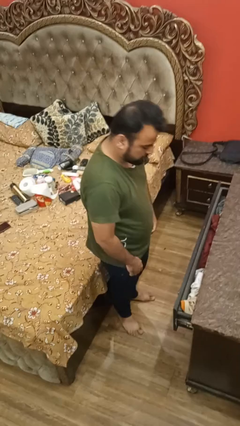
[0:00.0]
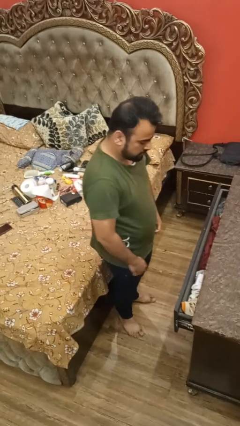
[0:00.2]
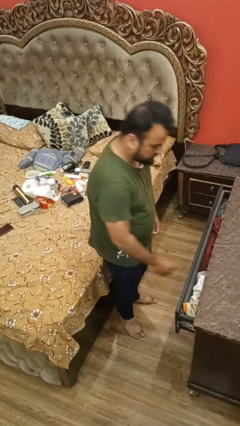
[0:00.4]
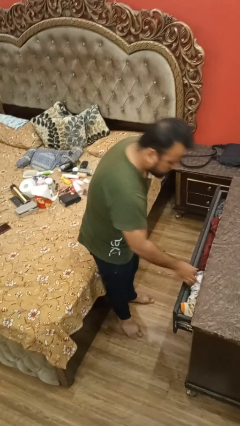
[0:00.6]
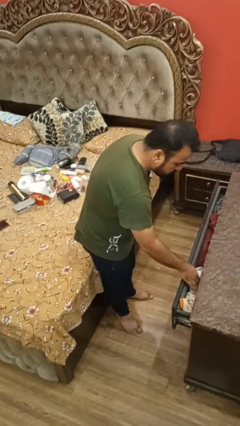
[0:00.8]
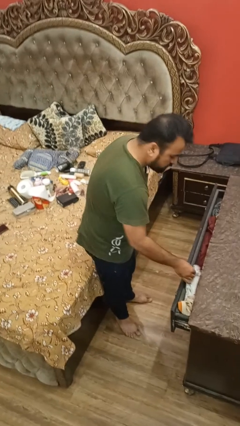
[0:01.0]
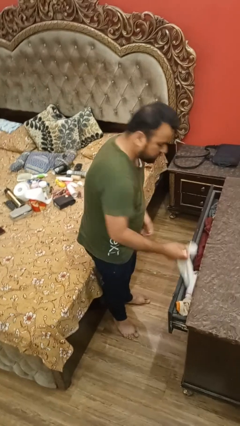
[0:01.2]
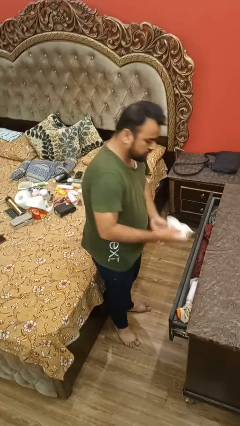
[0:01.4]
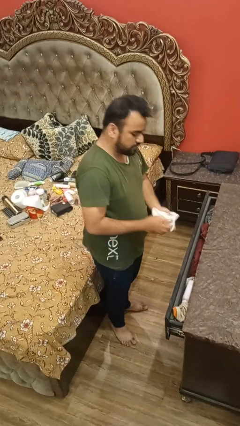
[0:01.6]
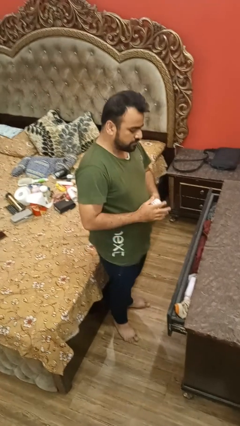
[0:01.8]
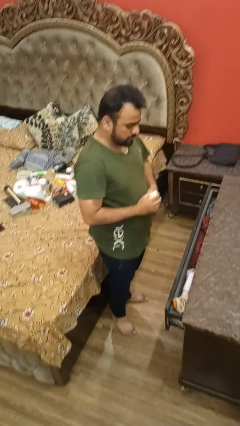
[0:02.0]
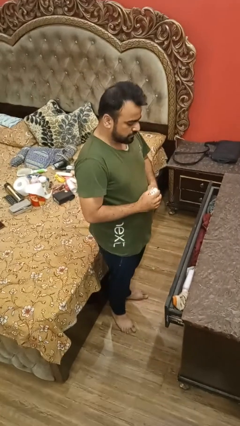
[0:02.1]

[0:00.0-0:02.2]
person takes clothes from dresser

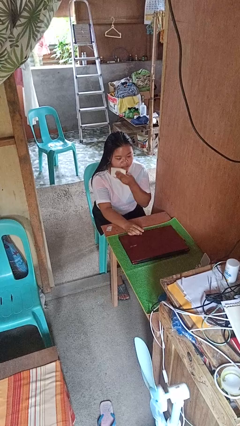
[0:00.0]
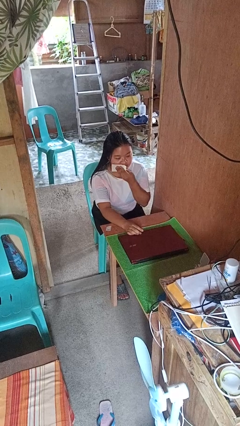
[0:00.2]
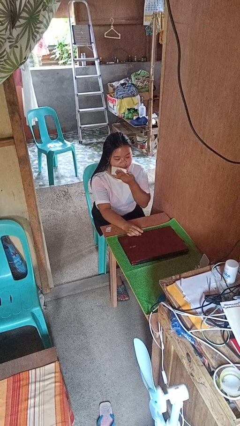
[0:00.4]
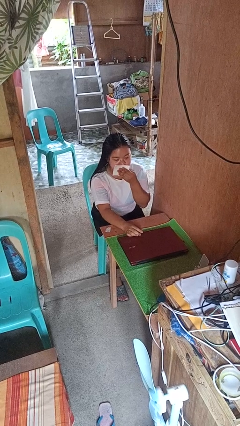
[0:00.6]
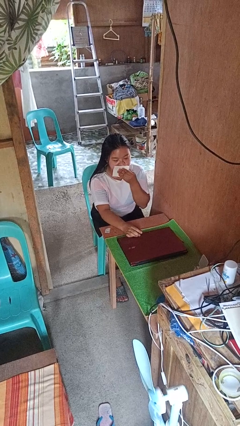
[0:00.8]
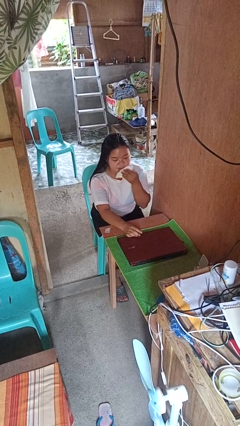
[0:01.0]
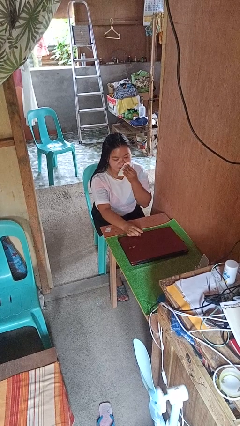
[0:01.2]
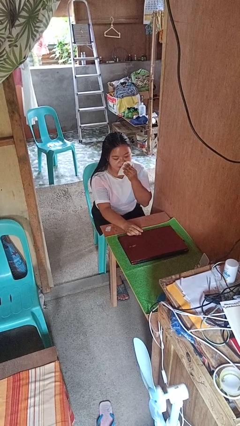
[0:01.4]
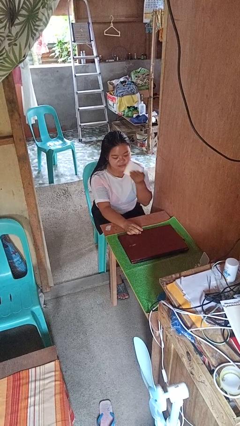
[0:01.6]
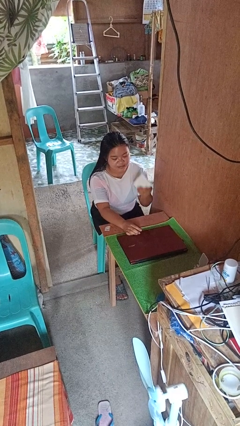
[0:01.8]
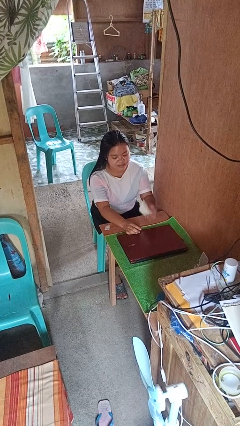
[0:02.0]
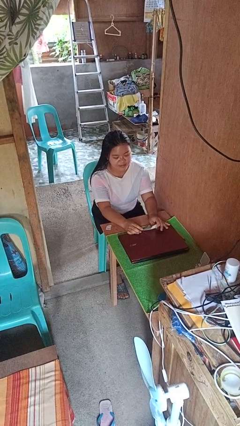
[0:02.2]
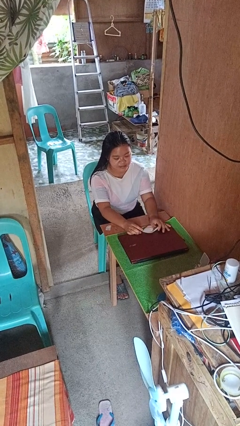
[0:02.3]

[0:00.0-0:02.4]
person wipes mouth with napkin

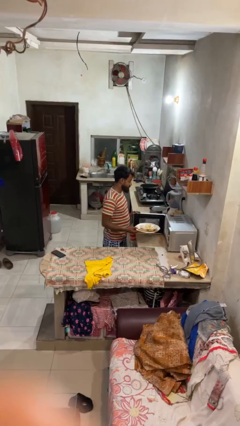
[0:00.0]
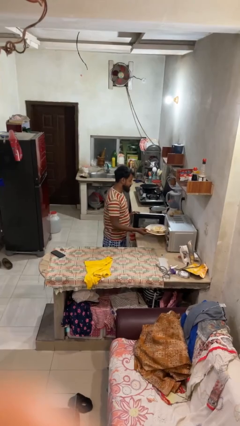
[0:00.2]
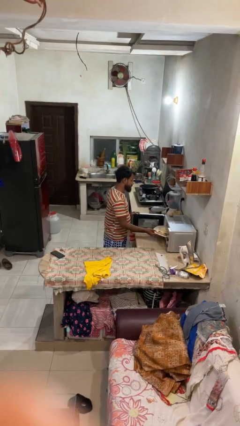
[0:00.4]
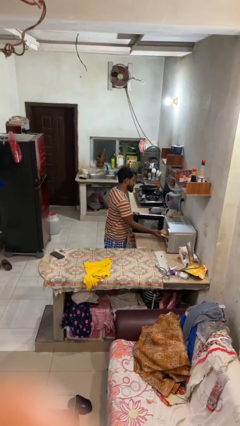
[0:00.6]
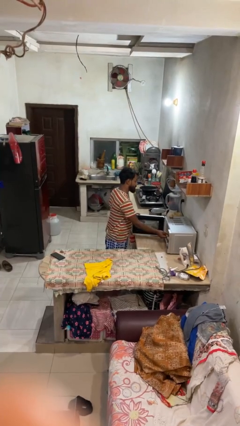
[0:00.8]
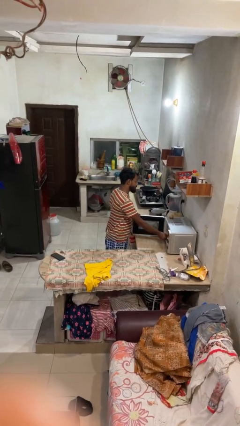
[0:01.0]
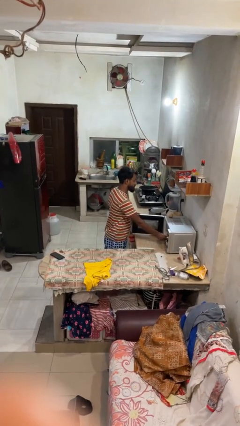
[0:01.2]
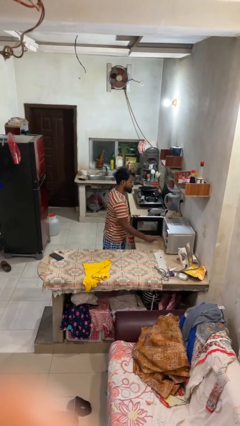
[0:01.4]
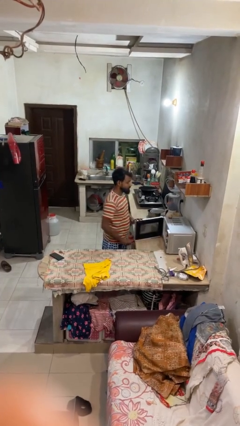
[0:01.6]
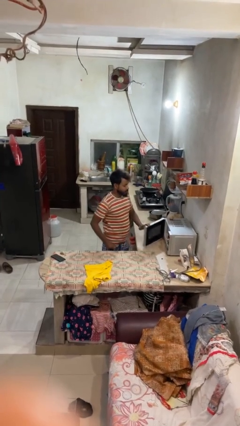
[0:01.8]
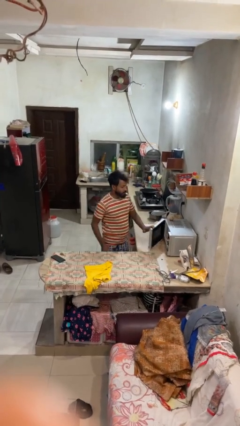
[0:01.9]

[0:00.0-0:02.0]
person puts object into microwave

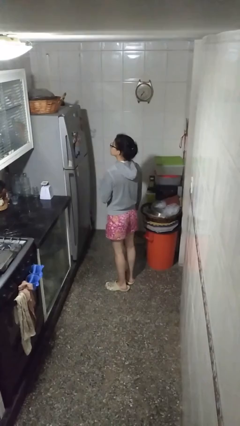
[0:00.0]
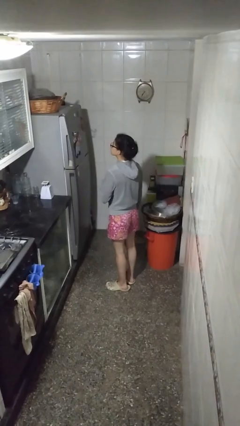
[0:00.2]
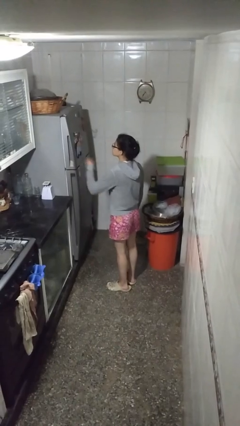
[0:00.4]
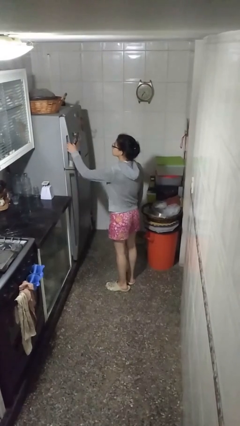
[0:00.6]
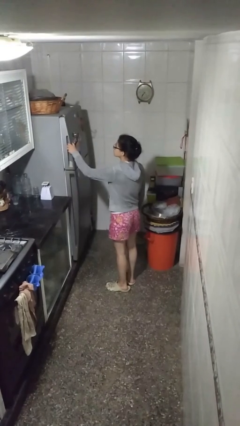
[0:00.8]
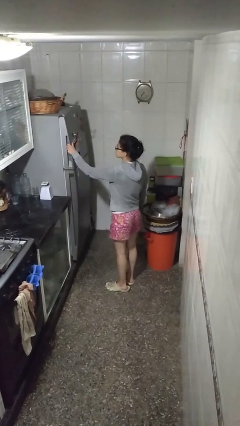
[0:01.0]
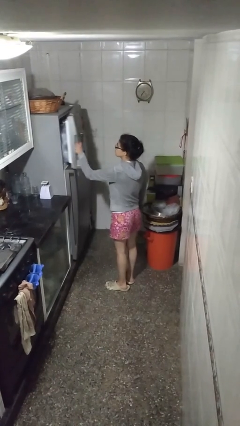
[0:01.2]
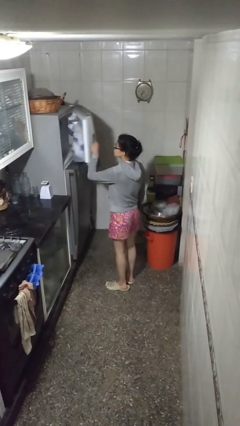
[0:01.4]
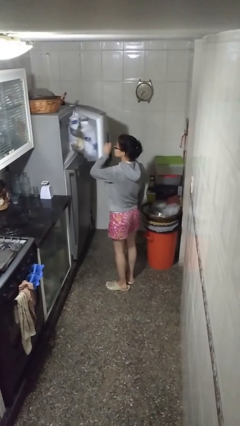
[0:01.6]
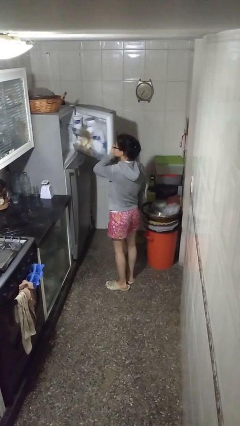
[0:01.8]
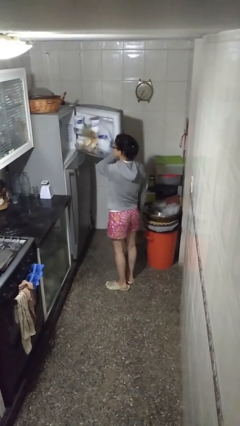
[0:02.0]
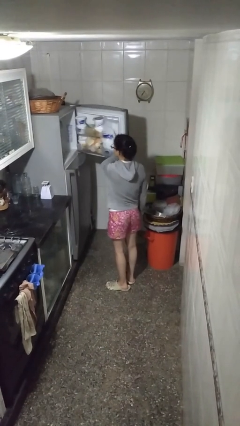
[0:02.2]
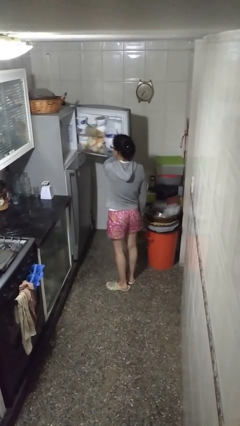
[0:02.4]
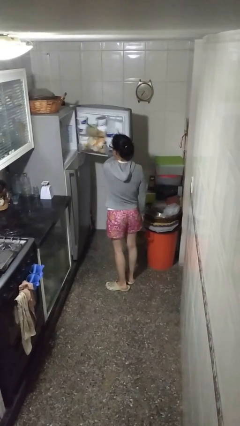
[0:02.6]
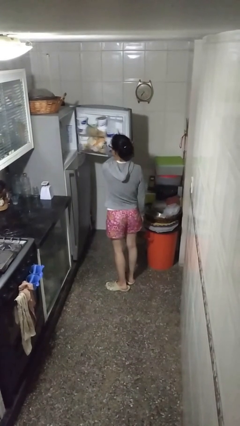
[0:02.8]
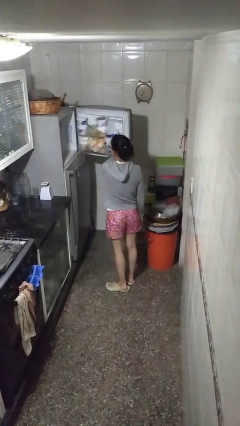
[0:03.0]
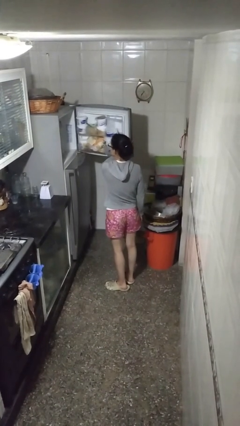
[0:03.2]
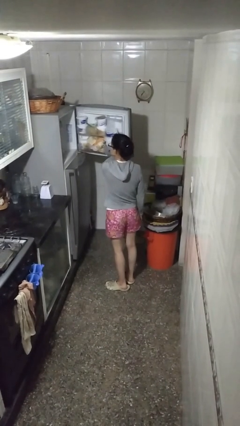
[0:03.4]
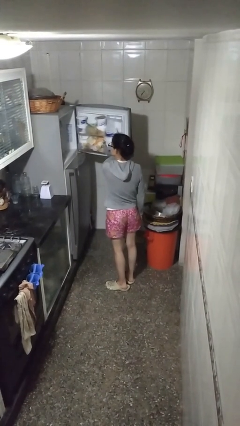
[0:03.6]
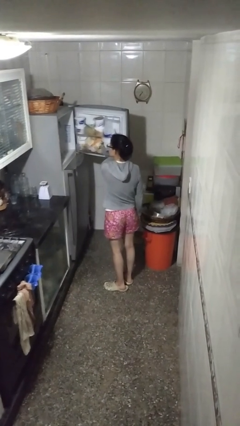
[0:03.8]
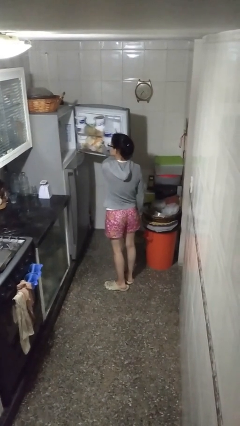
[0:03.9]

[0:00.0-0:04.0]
person opens refrigerator

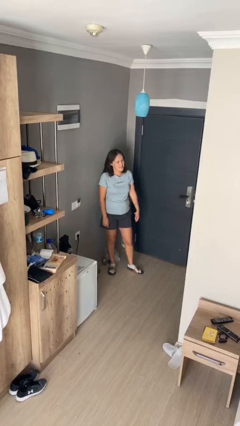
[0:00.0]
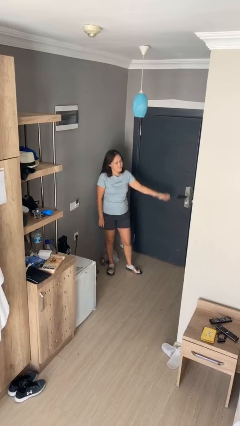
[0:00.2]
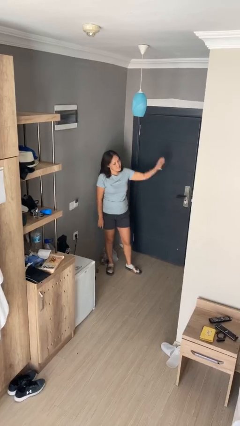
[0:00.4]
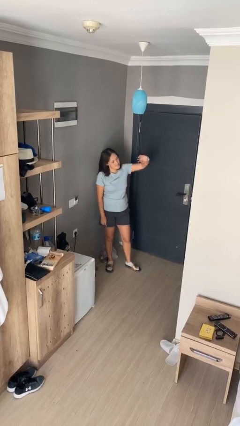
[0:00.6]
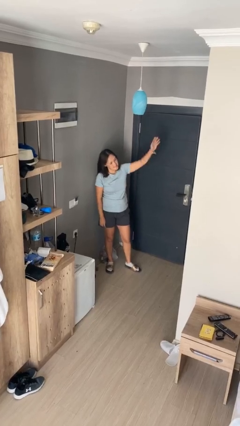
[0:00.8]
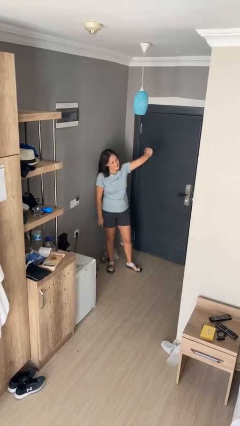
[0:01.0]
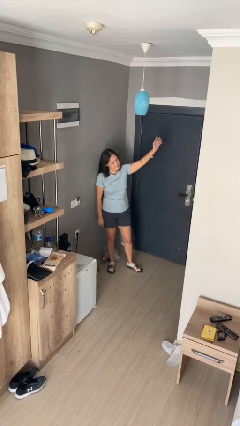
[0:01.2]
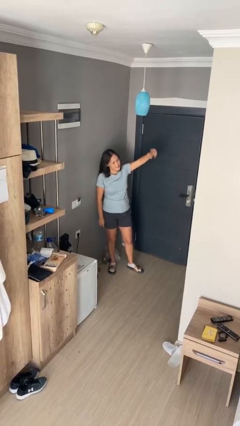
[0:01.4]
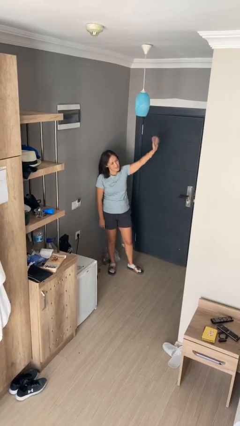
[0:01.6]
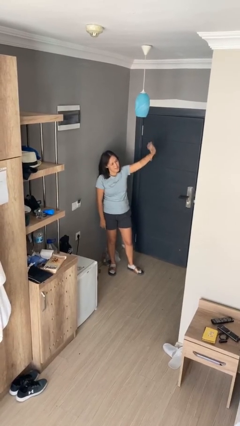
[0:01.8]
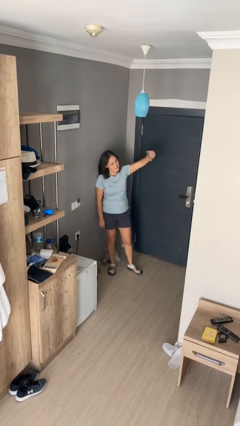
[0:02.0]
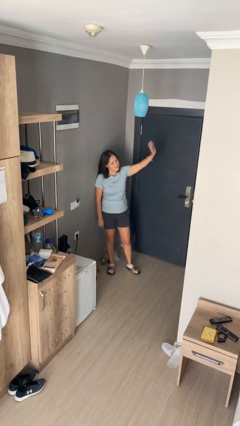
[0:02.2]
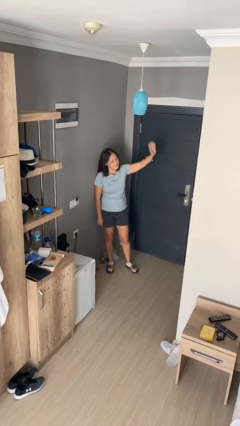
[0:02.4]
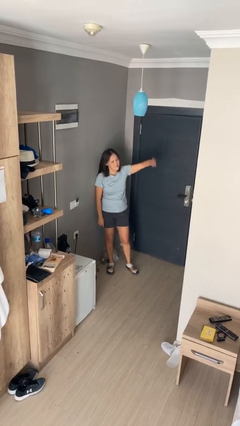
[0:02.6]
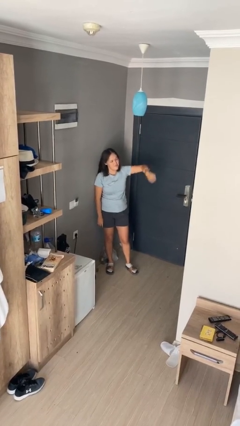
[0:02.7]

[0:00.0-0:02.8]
person waves at person

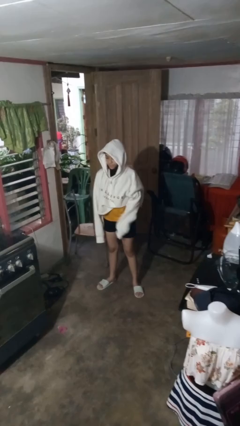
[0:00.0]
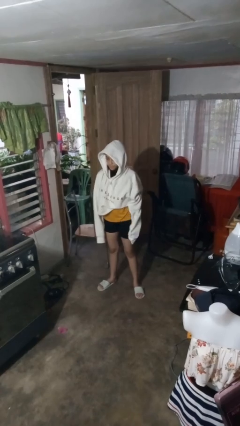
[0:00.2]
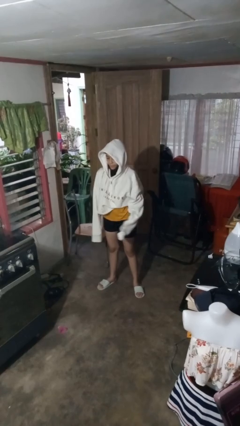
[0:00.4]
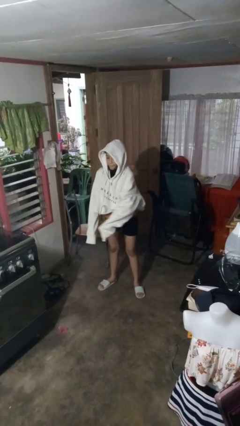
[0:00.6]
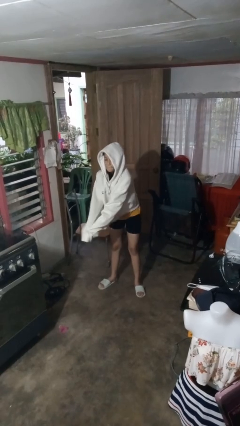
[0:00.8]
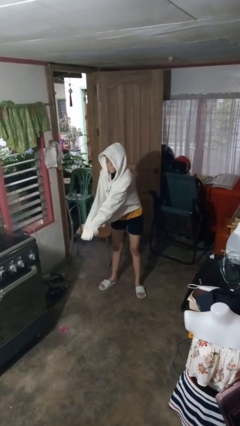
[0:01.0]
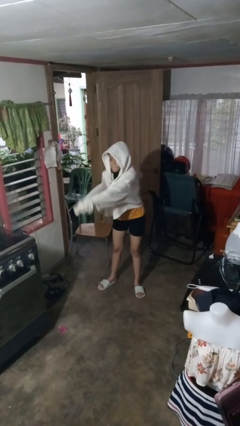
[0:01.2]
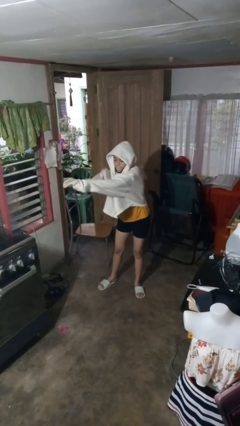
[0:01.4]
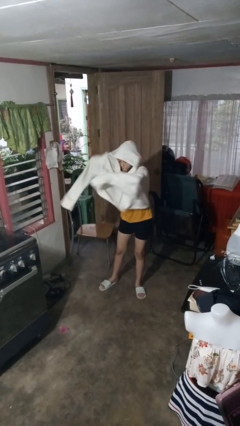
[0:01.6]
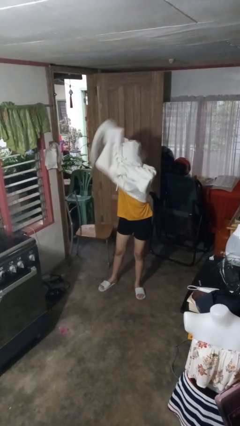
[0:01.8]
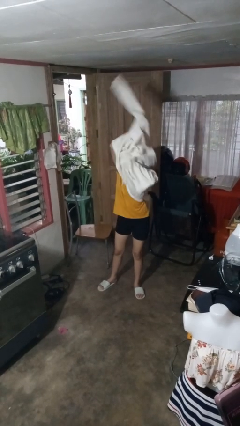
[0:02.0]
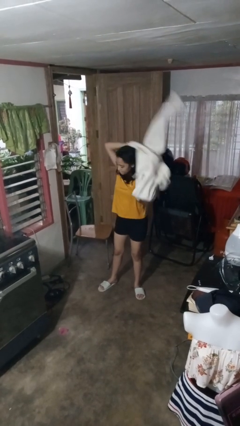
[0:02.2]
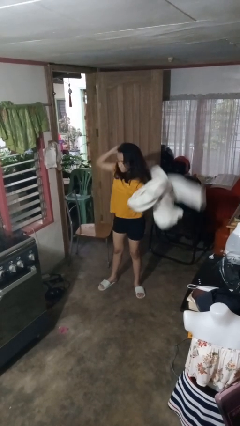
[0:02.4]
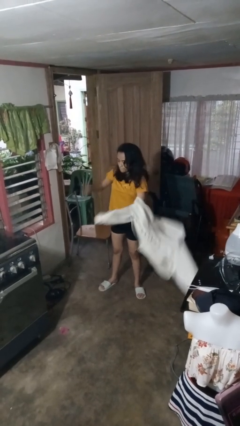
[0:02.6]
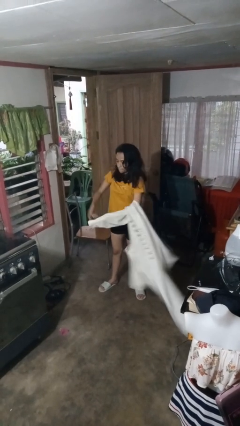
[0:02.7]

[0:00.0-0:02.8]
person takes off hoodie

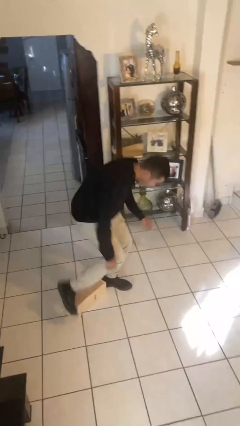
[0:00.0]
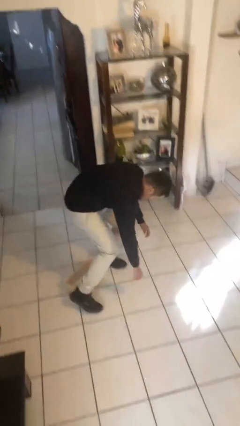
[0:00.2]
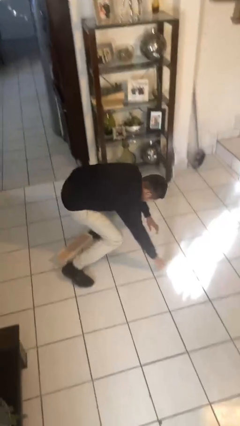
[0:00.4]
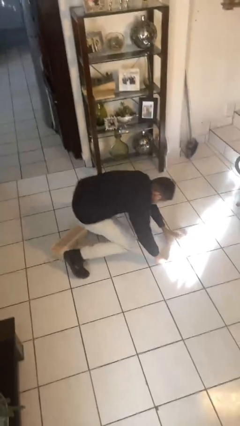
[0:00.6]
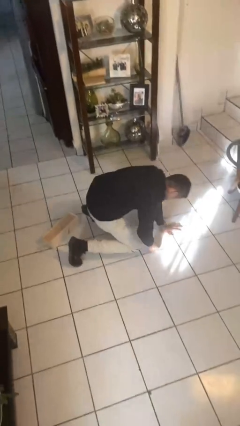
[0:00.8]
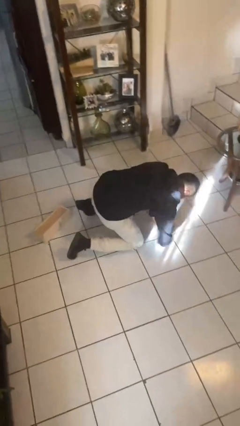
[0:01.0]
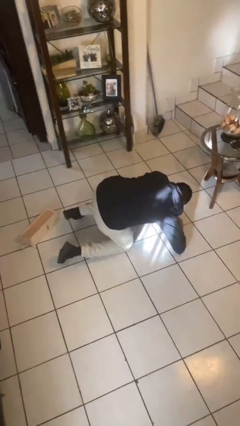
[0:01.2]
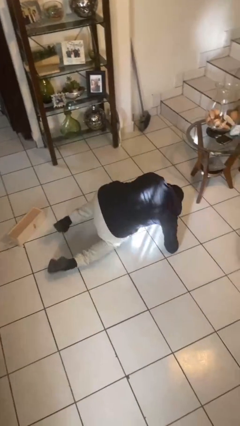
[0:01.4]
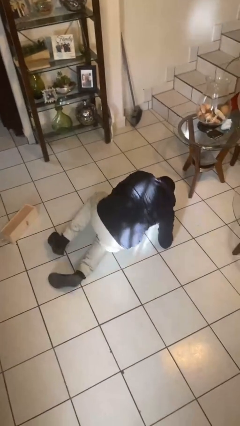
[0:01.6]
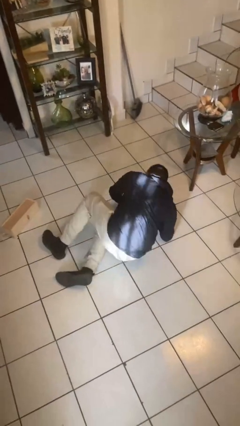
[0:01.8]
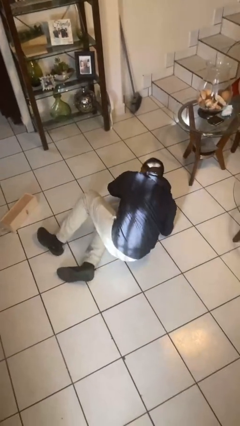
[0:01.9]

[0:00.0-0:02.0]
person lies down on floor
